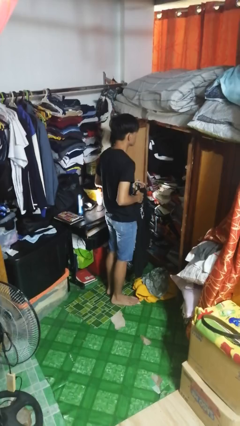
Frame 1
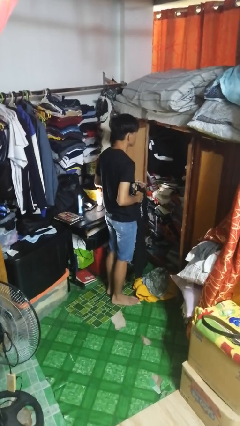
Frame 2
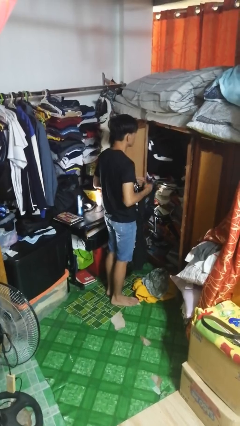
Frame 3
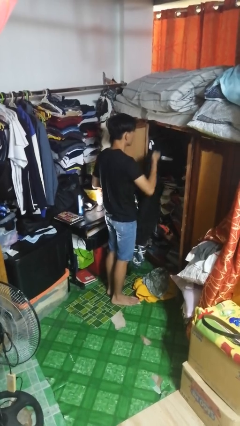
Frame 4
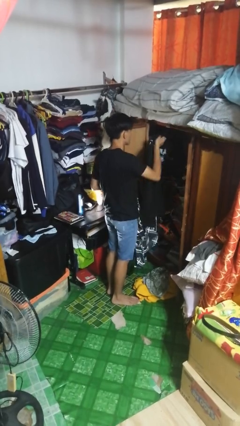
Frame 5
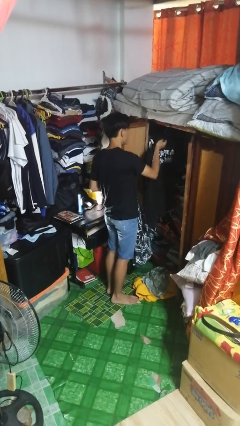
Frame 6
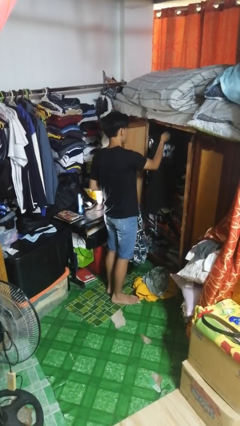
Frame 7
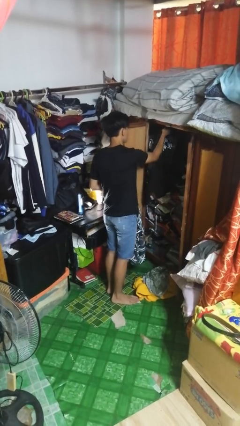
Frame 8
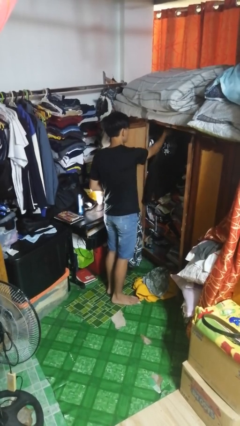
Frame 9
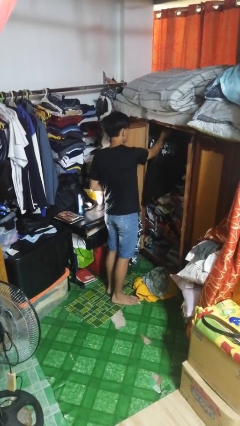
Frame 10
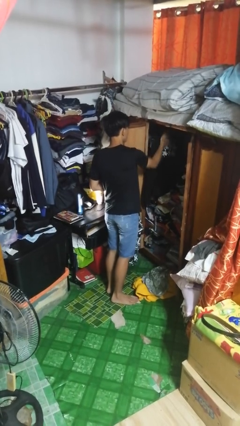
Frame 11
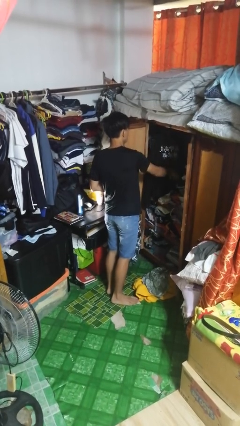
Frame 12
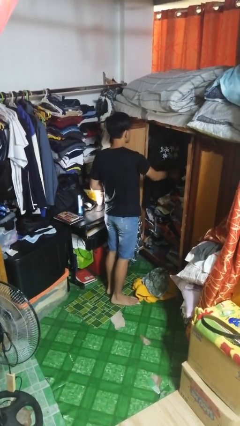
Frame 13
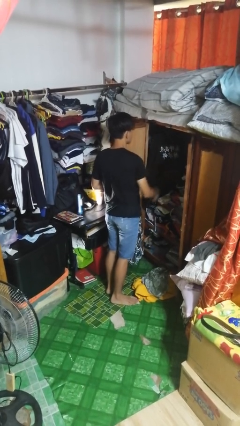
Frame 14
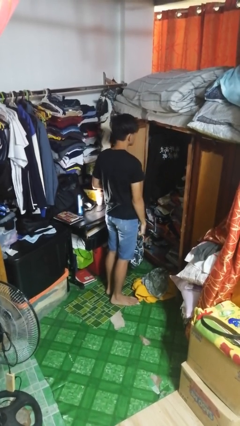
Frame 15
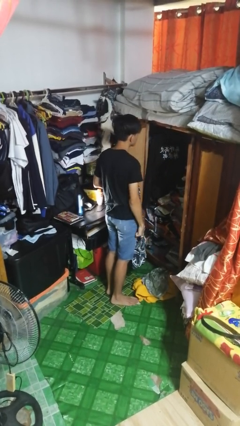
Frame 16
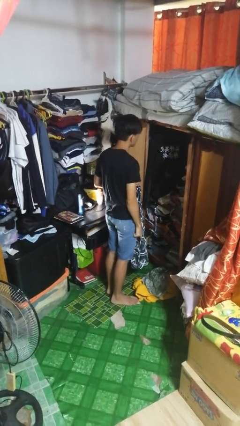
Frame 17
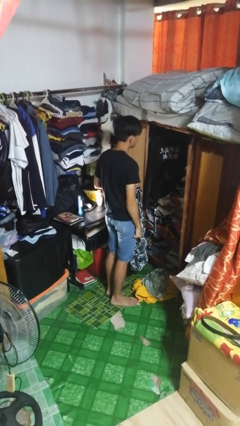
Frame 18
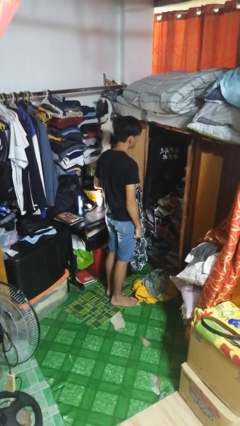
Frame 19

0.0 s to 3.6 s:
person puts clothes into closet

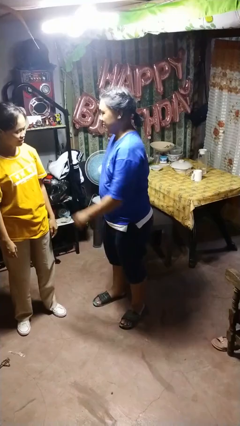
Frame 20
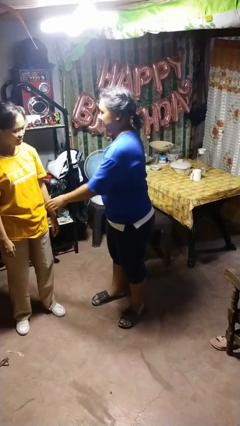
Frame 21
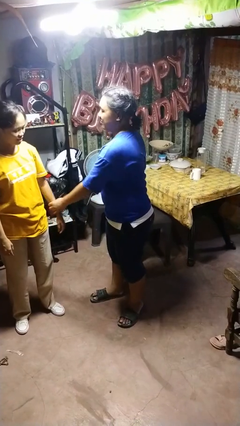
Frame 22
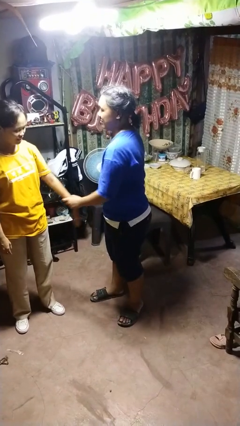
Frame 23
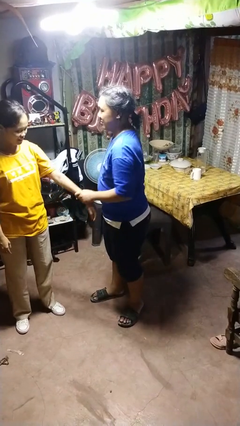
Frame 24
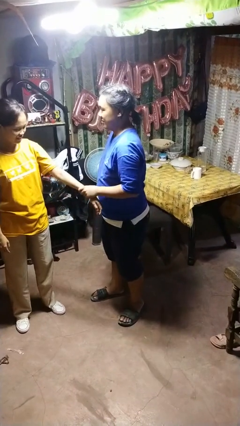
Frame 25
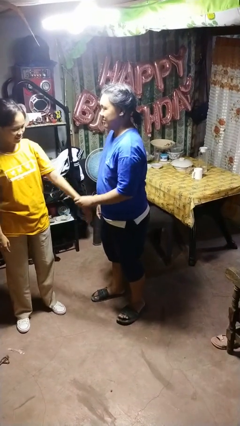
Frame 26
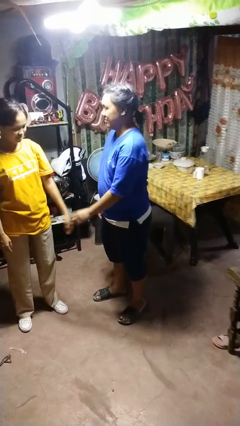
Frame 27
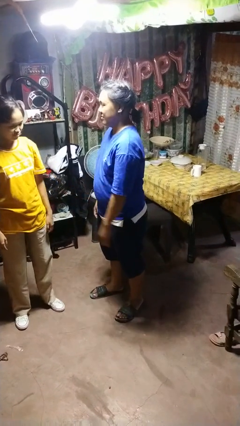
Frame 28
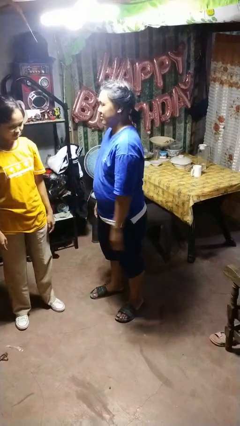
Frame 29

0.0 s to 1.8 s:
person grabs person by forearm

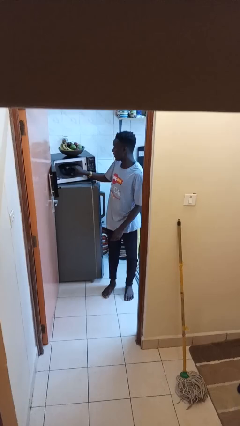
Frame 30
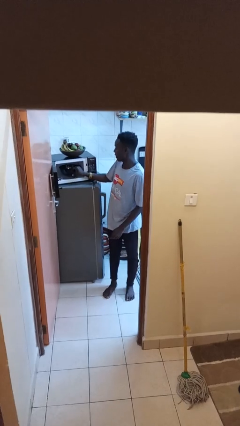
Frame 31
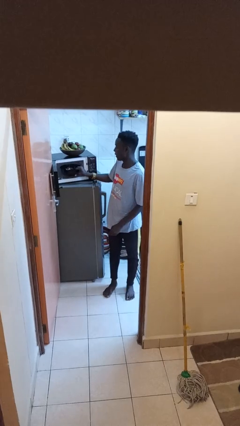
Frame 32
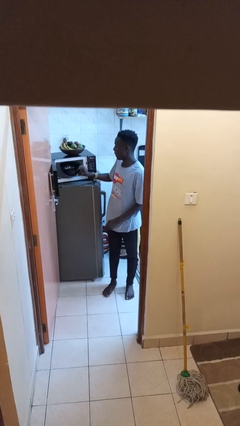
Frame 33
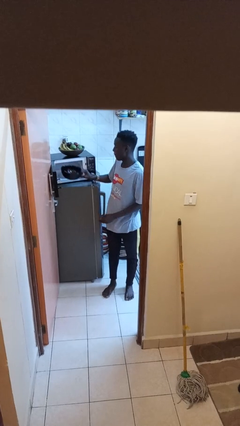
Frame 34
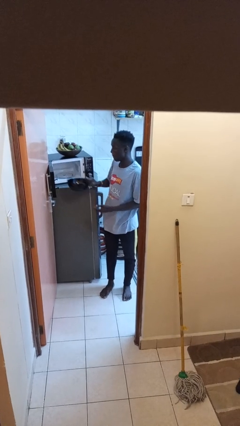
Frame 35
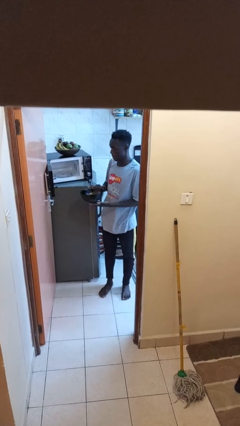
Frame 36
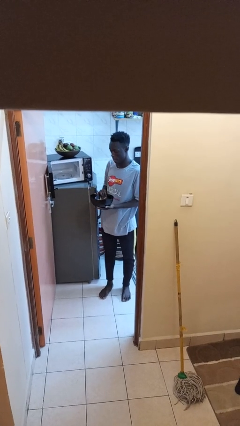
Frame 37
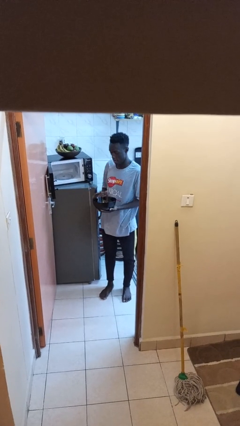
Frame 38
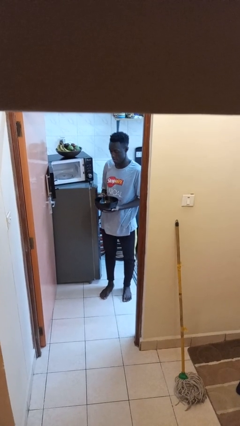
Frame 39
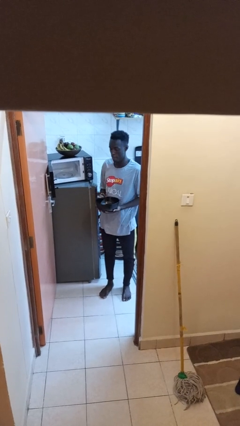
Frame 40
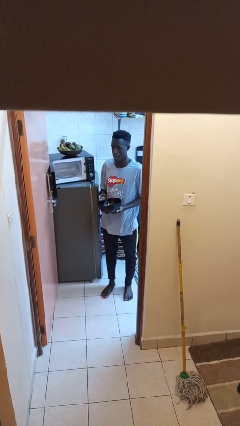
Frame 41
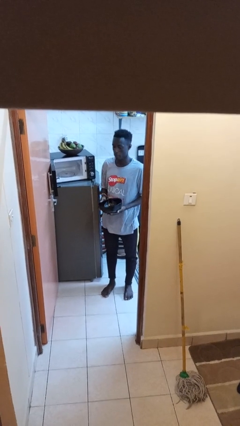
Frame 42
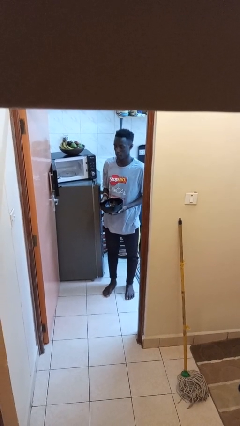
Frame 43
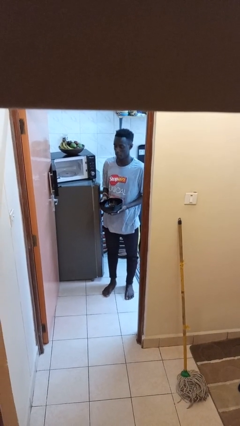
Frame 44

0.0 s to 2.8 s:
person takes object from microwave

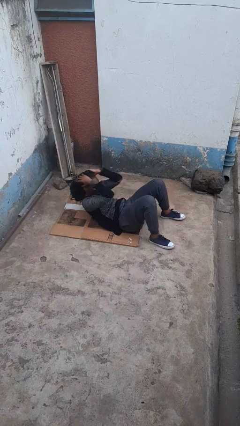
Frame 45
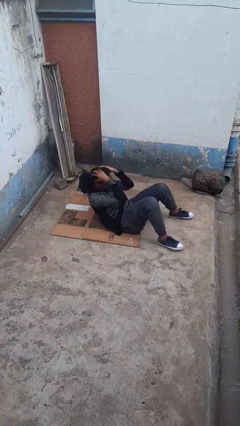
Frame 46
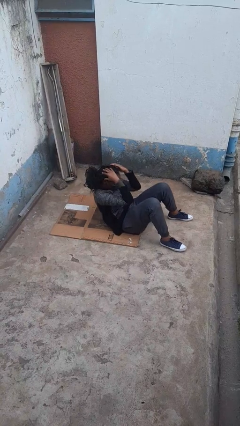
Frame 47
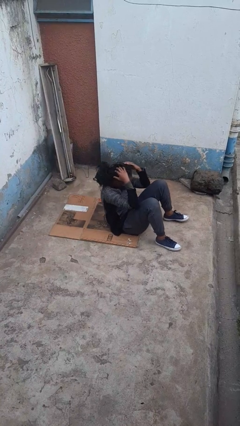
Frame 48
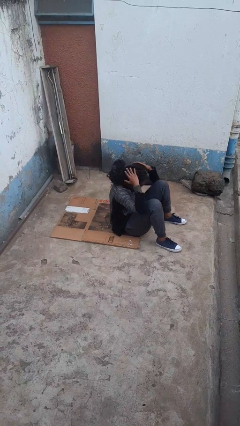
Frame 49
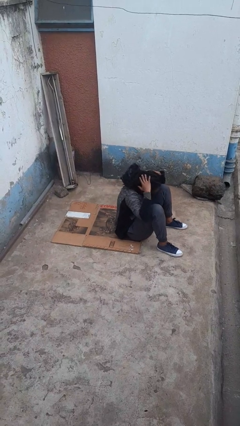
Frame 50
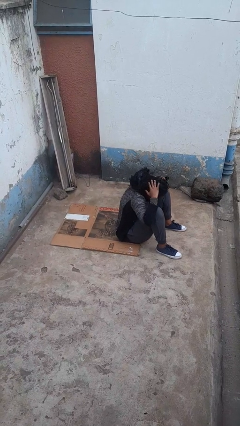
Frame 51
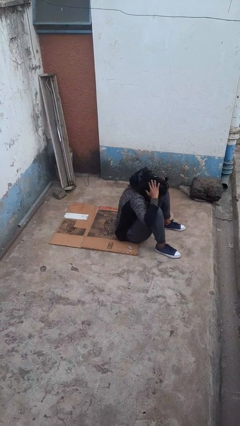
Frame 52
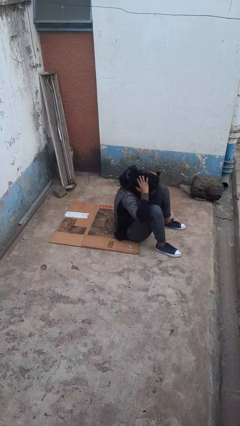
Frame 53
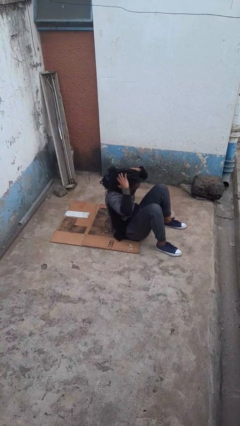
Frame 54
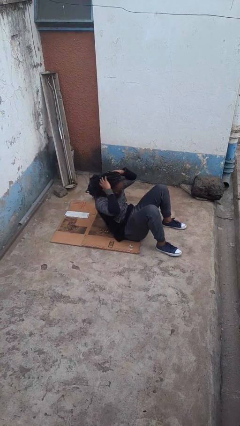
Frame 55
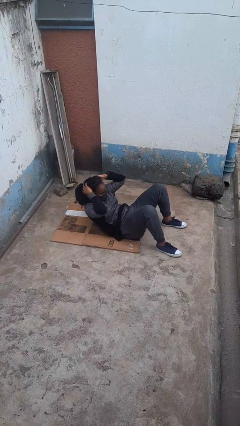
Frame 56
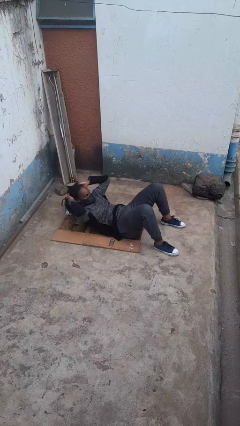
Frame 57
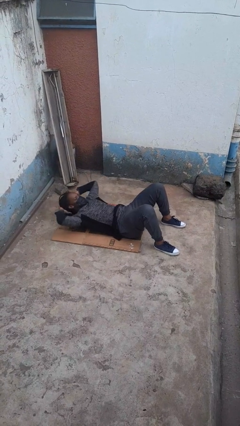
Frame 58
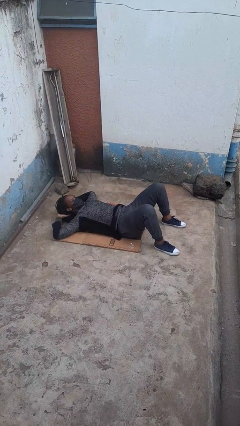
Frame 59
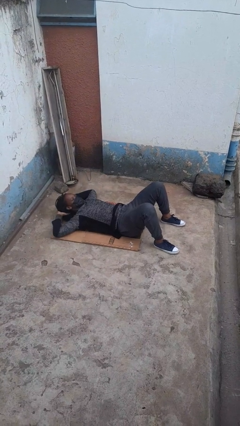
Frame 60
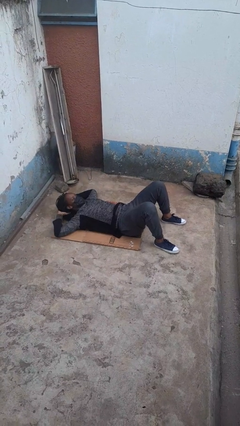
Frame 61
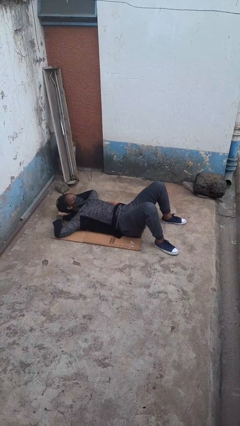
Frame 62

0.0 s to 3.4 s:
person exercises with situp

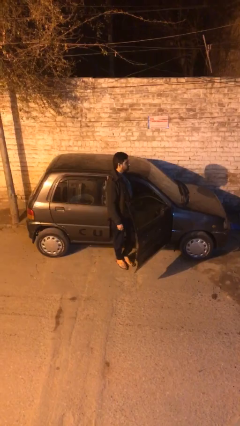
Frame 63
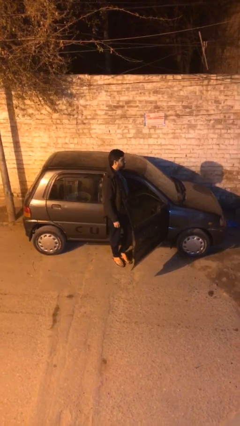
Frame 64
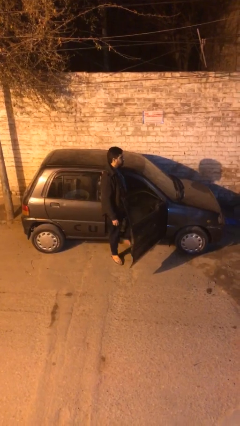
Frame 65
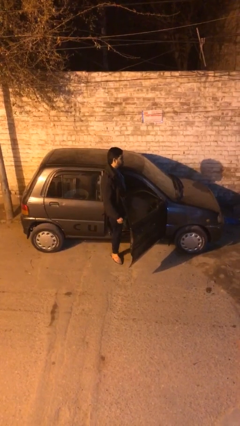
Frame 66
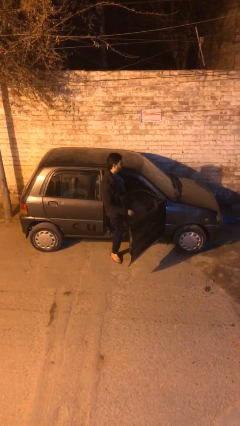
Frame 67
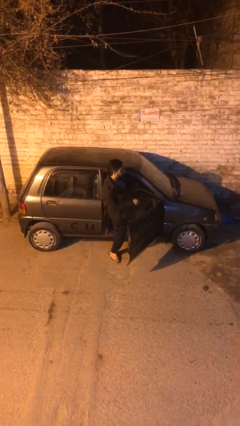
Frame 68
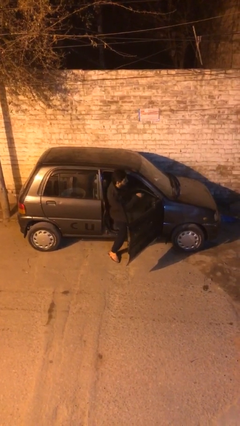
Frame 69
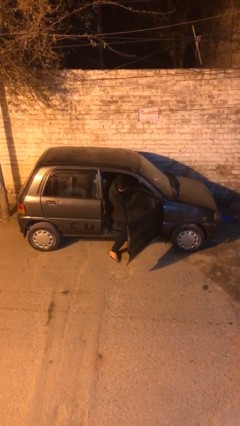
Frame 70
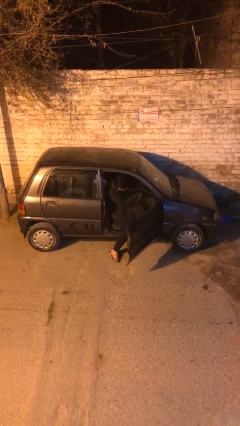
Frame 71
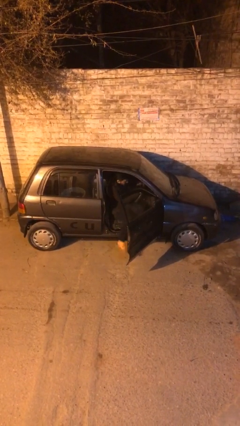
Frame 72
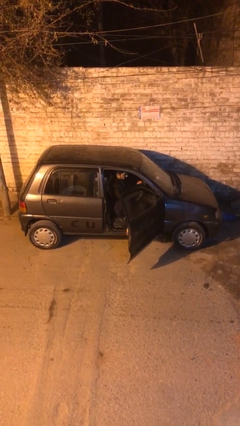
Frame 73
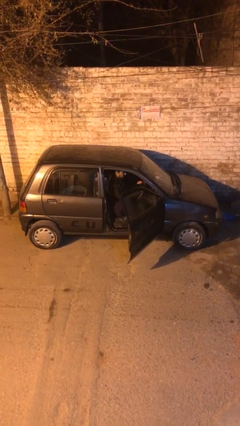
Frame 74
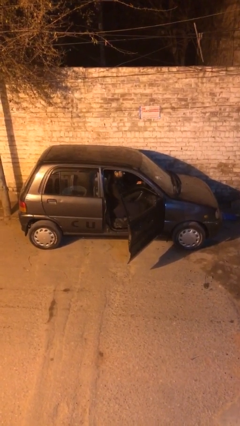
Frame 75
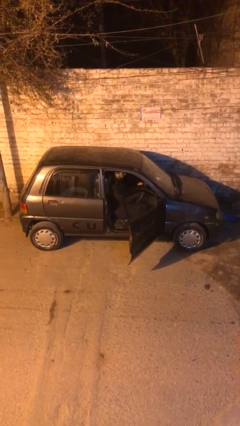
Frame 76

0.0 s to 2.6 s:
person enters car

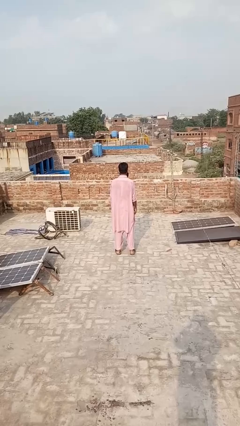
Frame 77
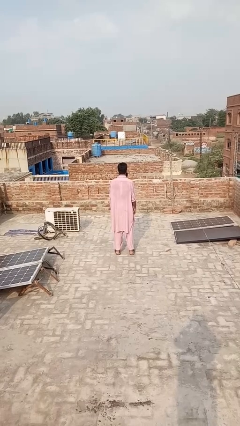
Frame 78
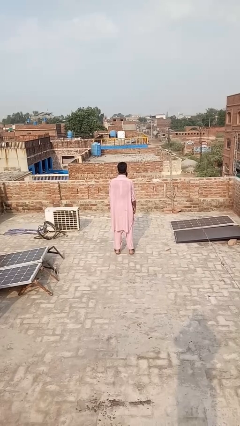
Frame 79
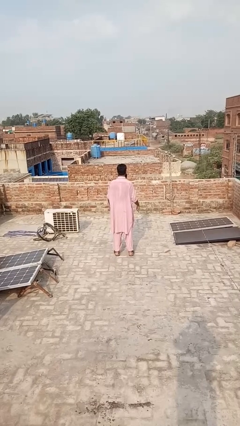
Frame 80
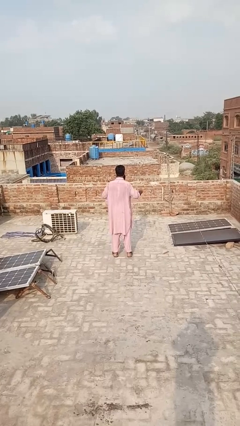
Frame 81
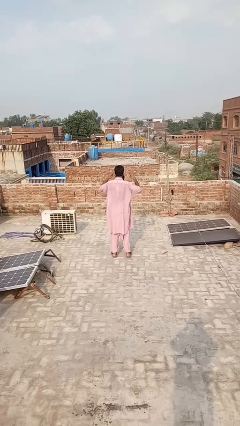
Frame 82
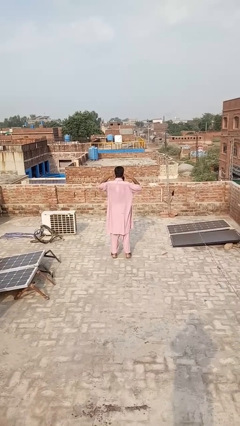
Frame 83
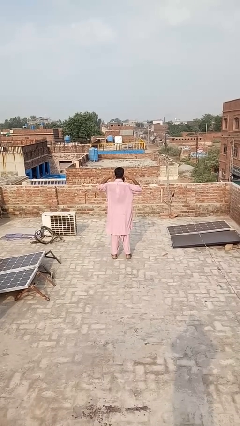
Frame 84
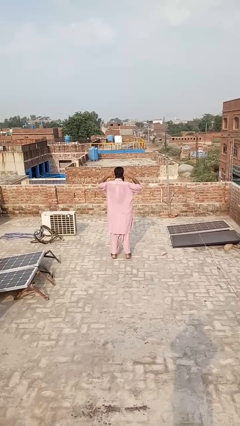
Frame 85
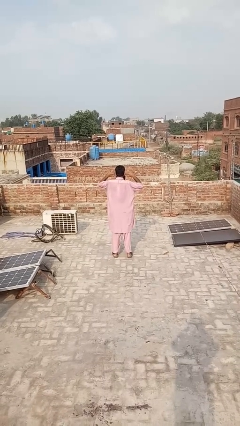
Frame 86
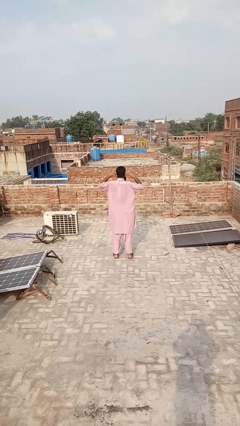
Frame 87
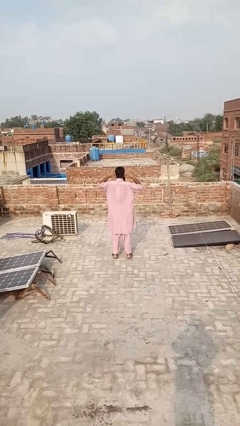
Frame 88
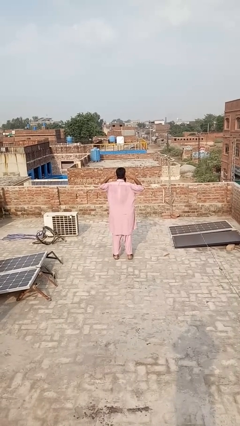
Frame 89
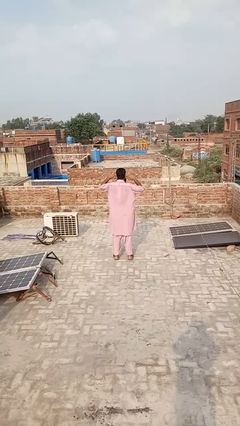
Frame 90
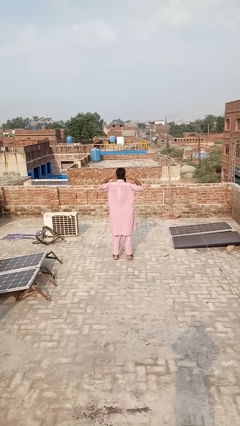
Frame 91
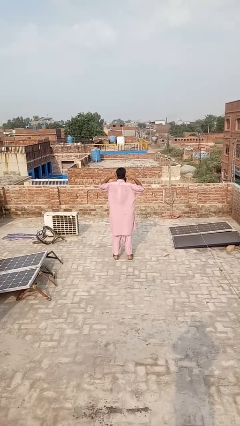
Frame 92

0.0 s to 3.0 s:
person puts fingers in ear
